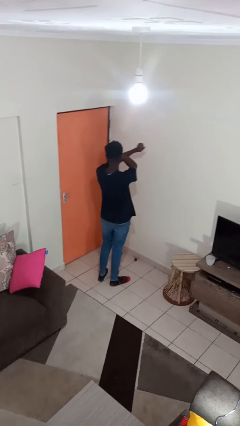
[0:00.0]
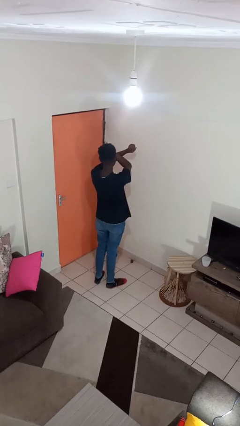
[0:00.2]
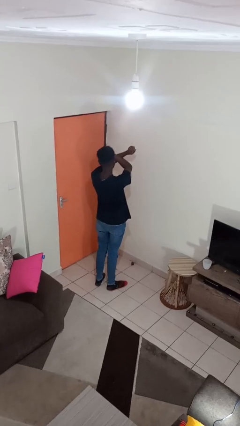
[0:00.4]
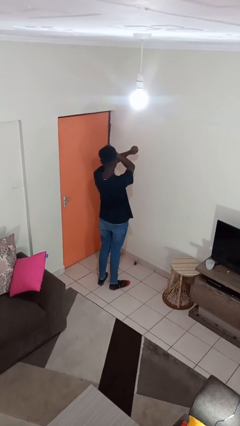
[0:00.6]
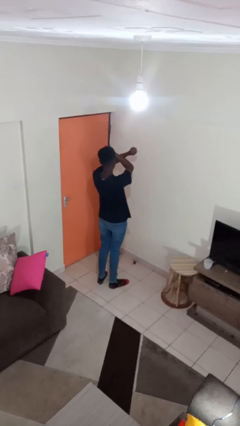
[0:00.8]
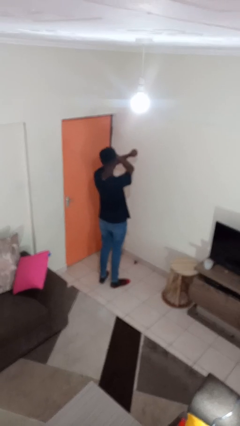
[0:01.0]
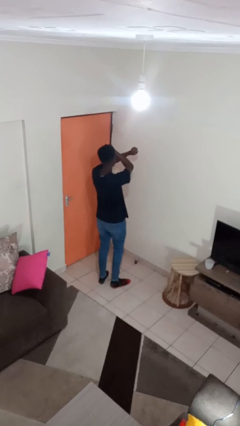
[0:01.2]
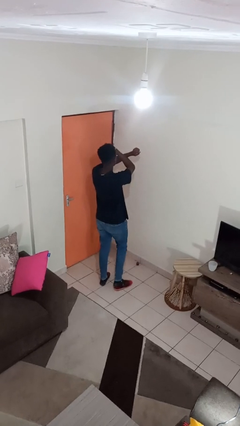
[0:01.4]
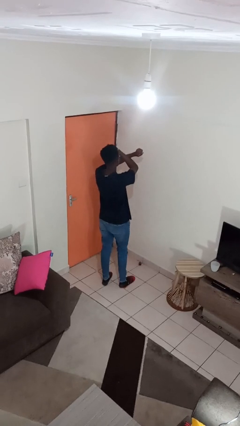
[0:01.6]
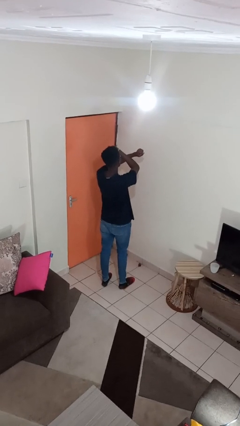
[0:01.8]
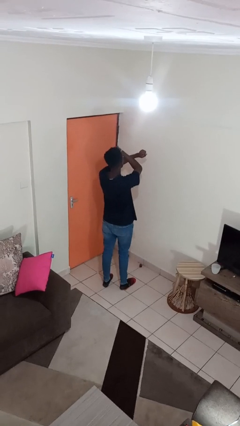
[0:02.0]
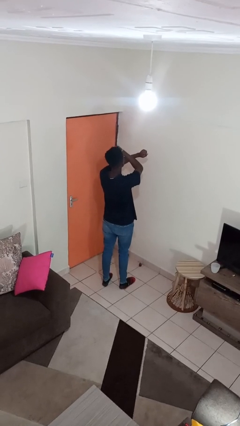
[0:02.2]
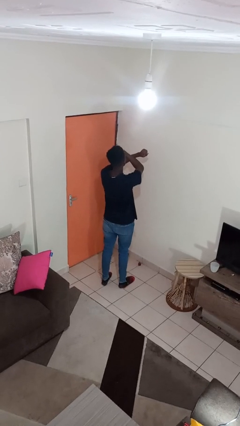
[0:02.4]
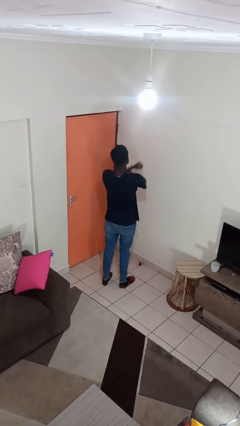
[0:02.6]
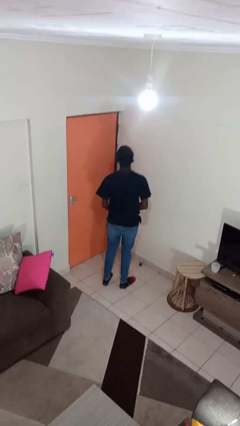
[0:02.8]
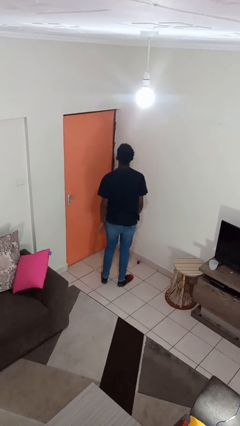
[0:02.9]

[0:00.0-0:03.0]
person gestures arms x

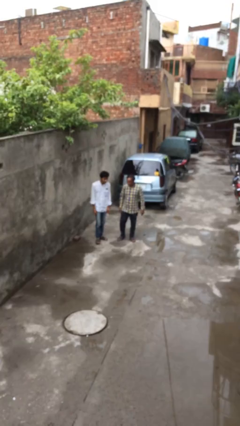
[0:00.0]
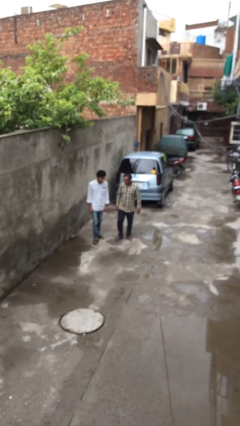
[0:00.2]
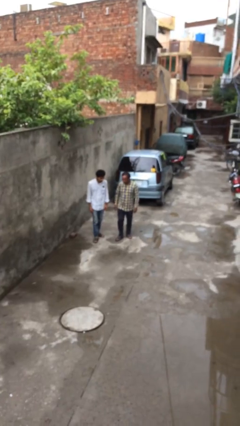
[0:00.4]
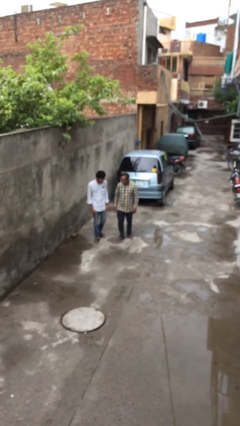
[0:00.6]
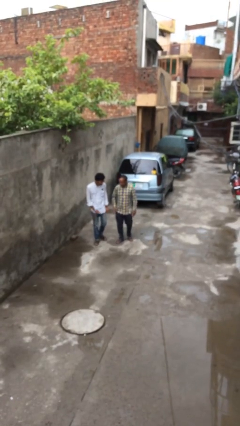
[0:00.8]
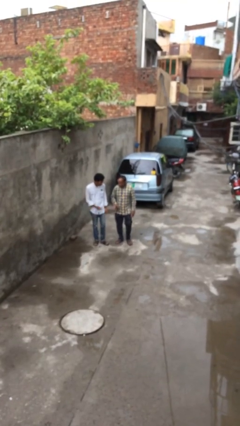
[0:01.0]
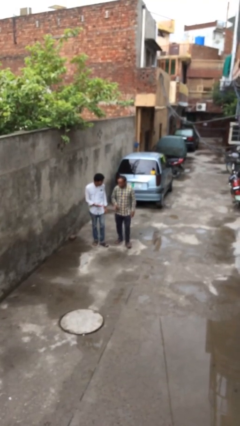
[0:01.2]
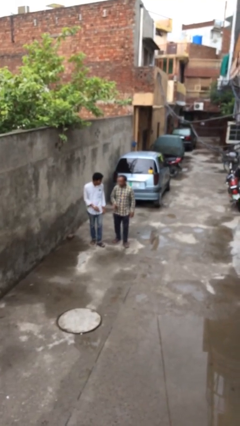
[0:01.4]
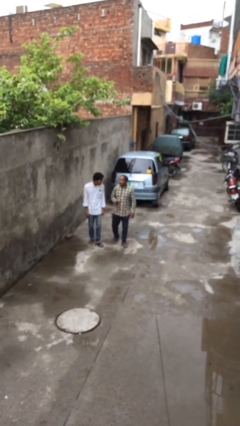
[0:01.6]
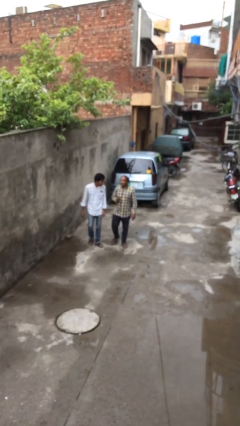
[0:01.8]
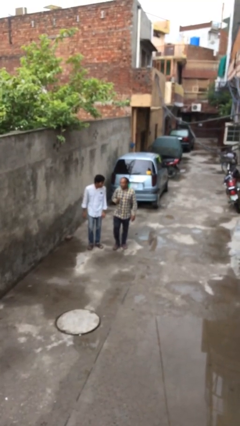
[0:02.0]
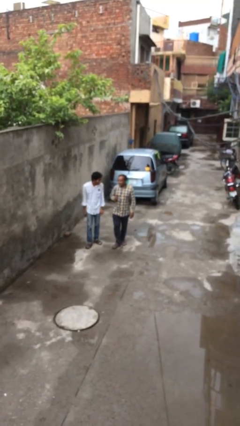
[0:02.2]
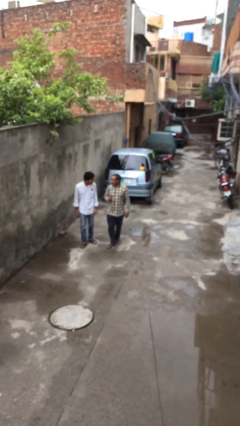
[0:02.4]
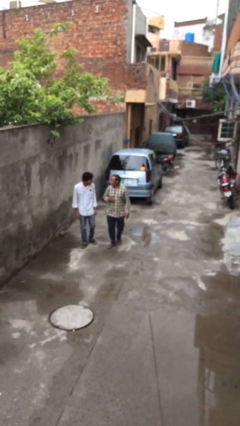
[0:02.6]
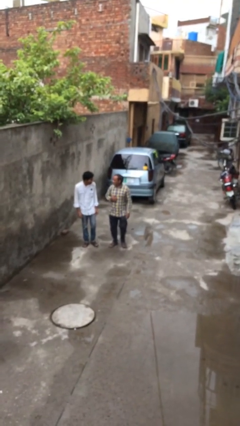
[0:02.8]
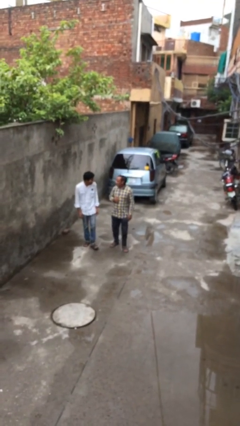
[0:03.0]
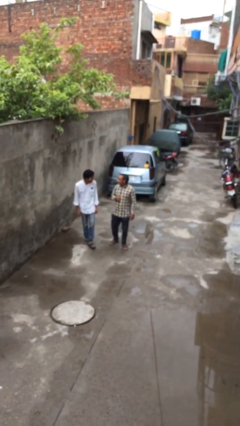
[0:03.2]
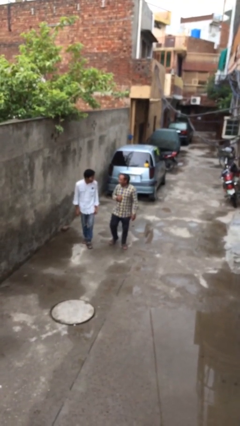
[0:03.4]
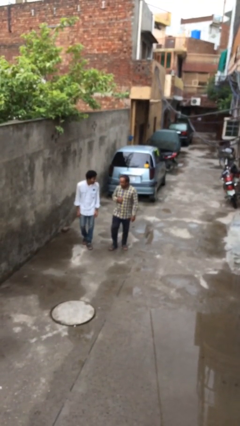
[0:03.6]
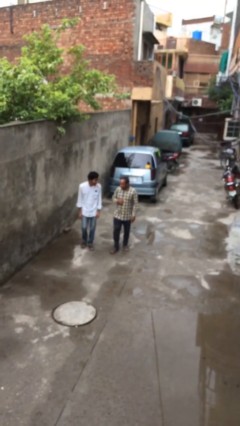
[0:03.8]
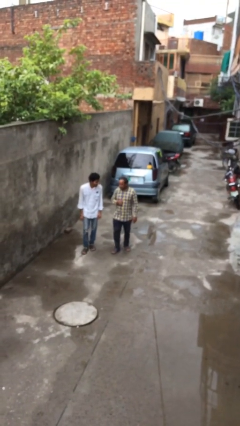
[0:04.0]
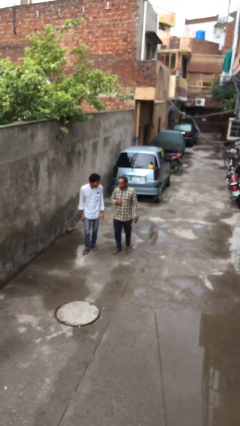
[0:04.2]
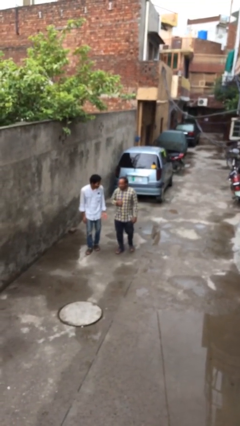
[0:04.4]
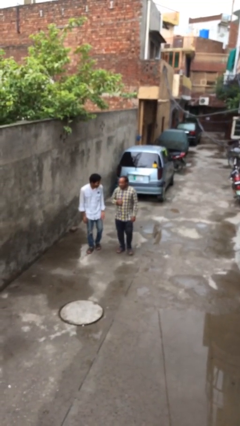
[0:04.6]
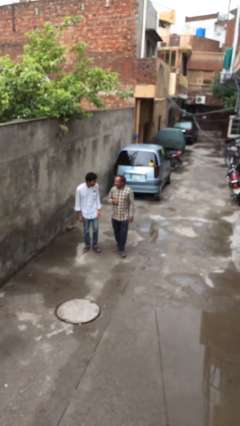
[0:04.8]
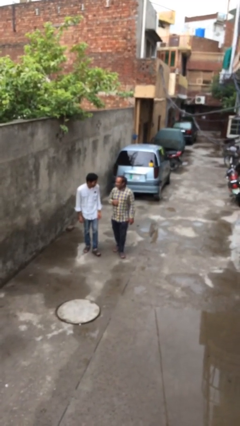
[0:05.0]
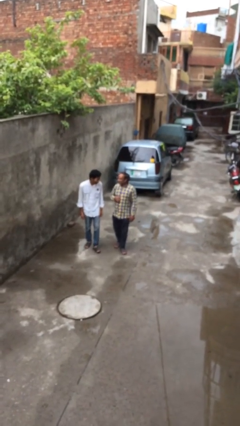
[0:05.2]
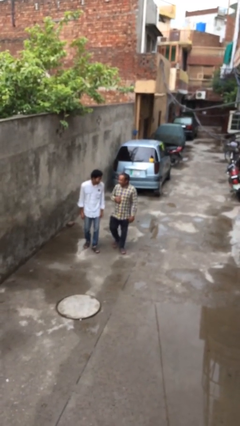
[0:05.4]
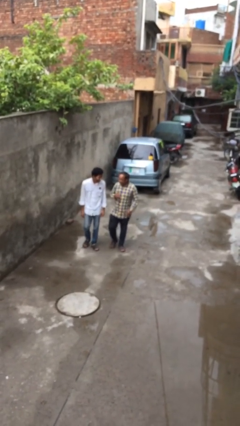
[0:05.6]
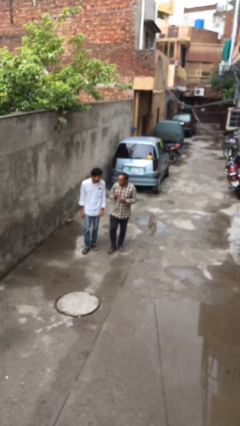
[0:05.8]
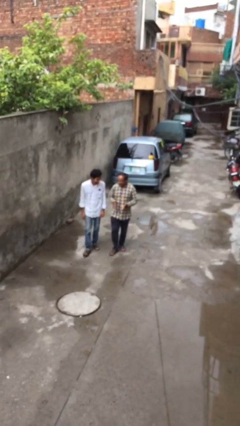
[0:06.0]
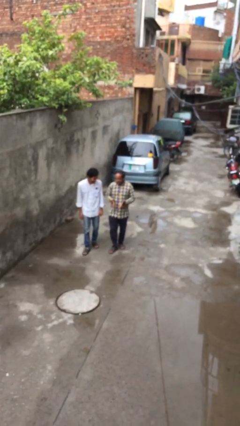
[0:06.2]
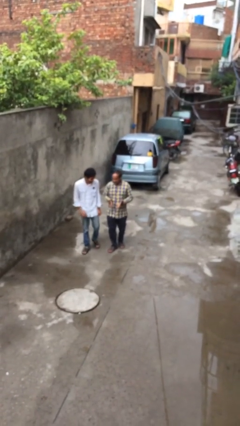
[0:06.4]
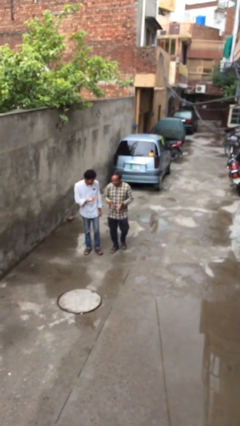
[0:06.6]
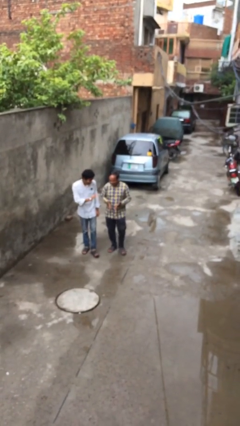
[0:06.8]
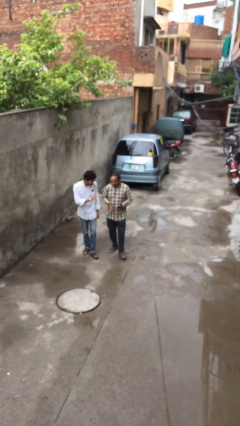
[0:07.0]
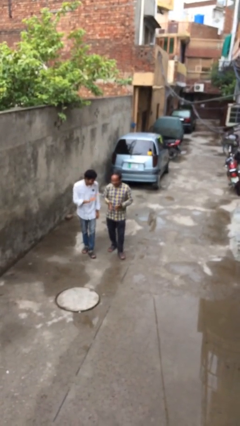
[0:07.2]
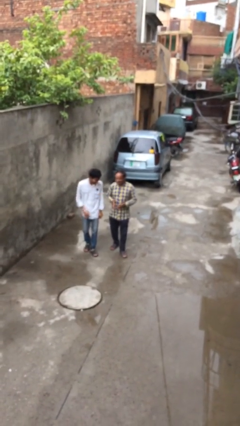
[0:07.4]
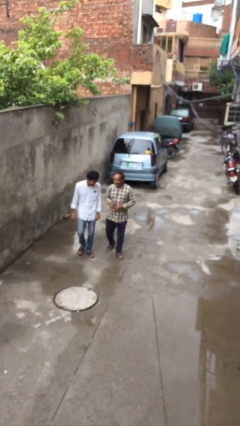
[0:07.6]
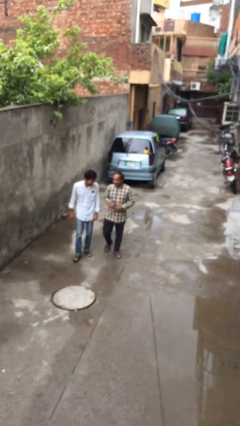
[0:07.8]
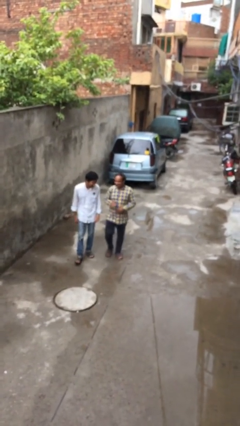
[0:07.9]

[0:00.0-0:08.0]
person talks to person

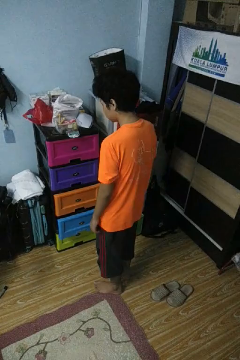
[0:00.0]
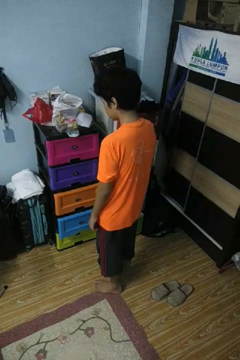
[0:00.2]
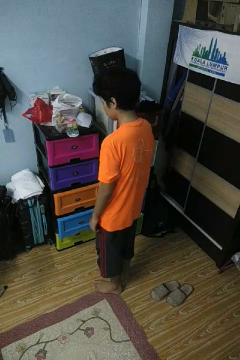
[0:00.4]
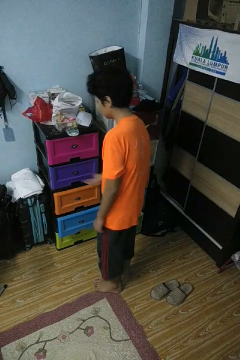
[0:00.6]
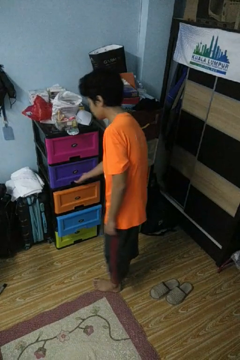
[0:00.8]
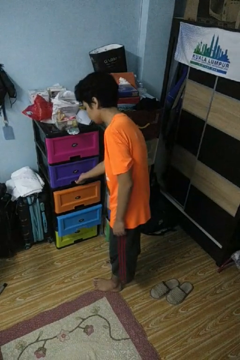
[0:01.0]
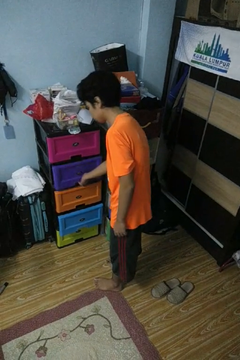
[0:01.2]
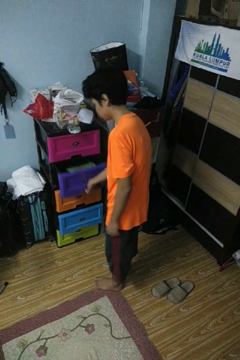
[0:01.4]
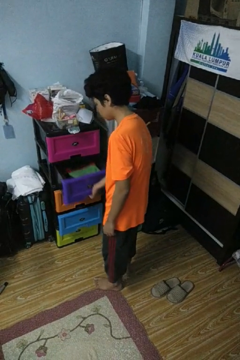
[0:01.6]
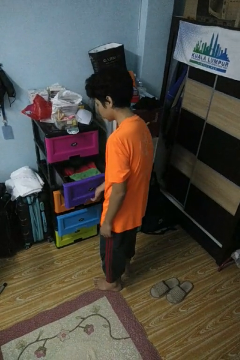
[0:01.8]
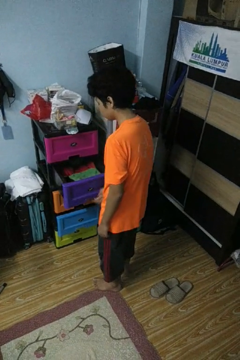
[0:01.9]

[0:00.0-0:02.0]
person opens dresser drawer

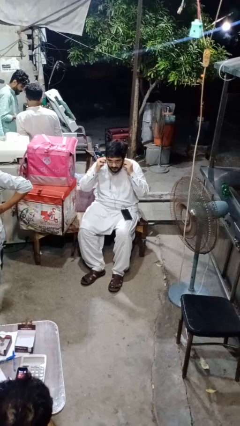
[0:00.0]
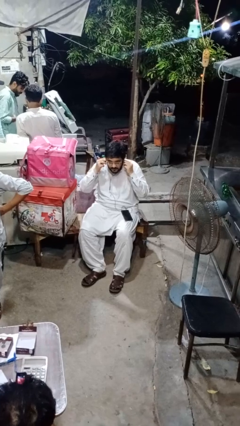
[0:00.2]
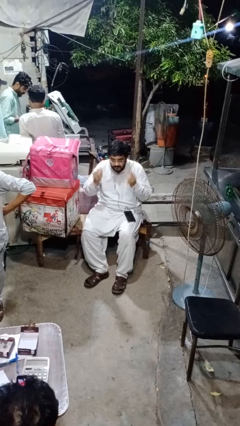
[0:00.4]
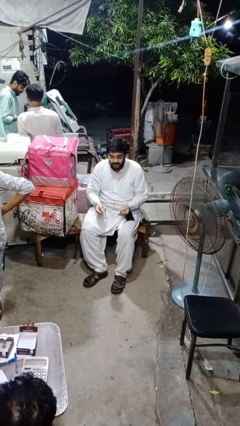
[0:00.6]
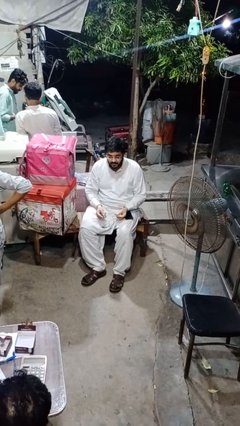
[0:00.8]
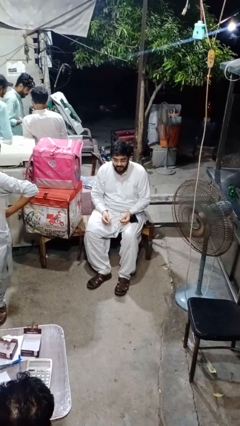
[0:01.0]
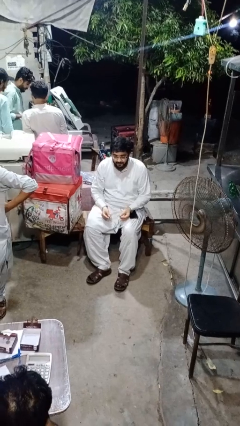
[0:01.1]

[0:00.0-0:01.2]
person takes off headphones

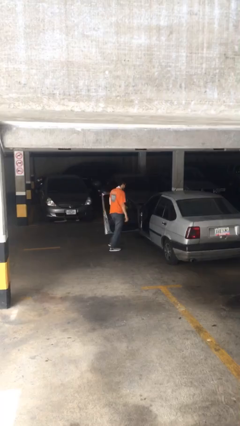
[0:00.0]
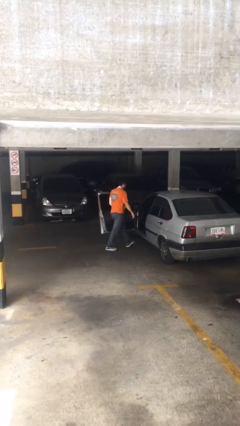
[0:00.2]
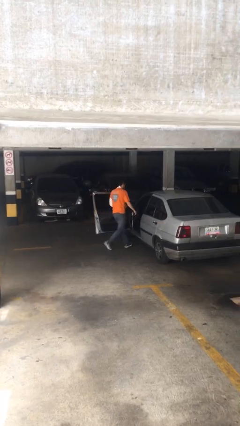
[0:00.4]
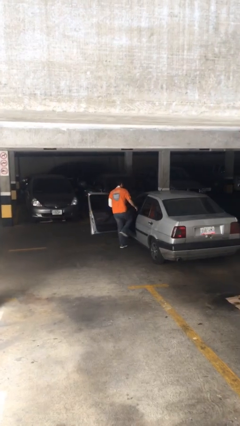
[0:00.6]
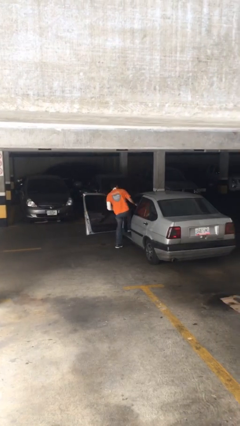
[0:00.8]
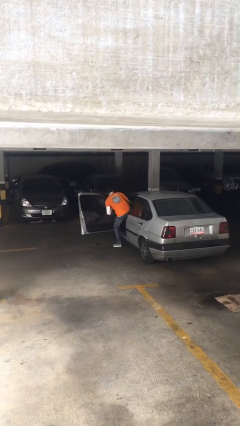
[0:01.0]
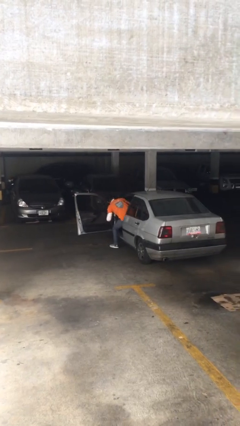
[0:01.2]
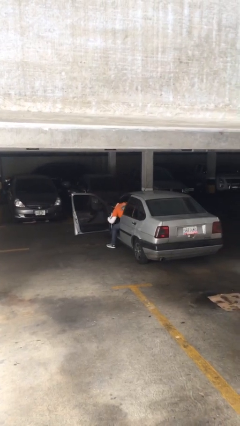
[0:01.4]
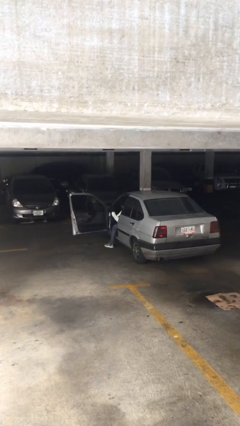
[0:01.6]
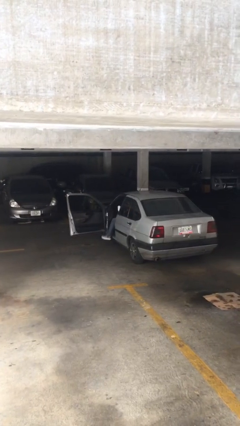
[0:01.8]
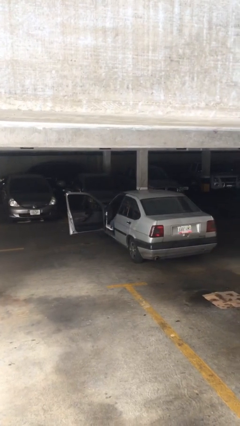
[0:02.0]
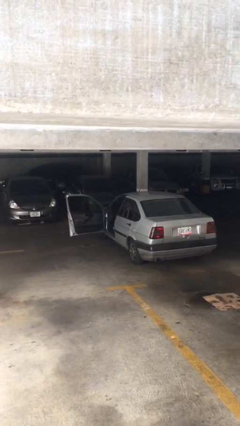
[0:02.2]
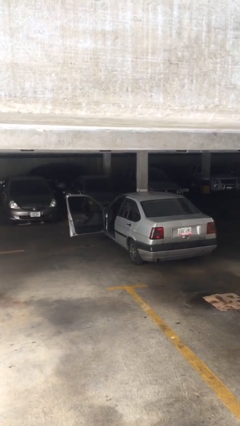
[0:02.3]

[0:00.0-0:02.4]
person enters car

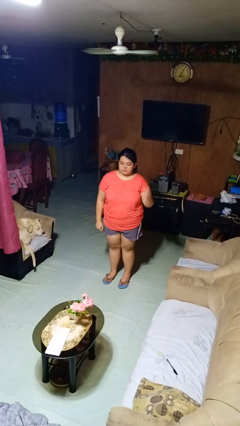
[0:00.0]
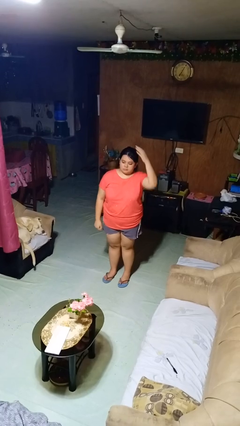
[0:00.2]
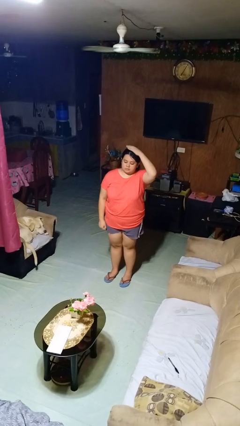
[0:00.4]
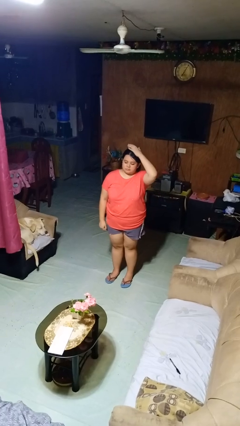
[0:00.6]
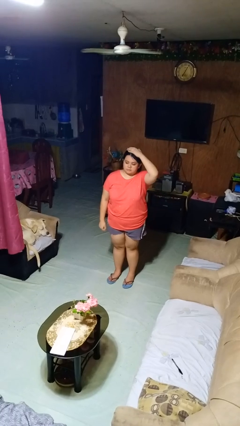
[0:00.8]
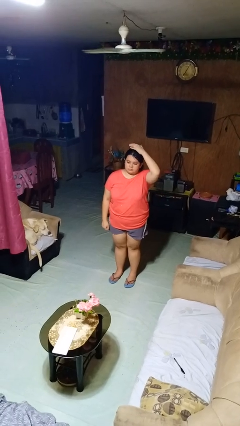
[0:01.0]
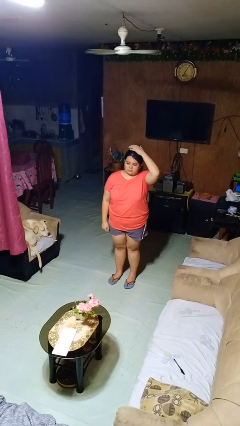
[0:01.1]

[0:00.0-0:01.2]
person pats head
